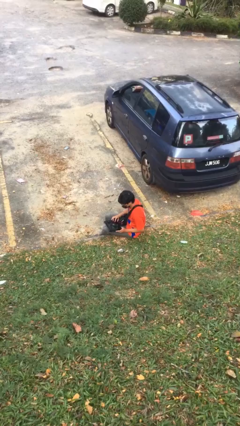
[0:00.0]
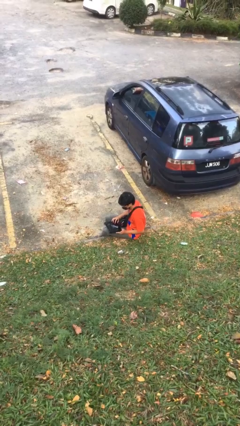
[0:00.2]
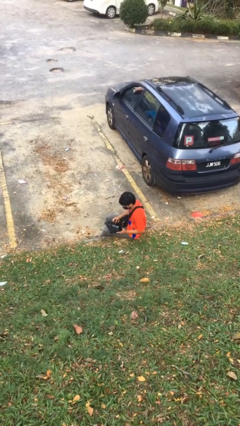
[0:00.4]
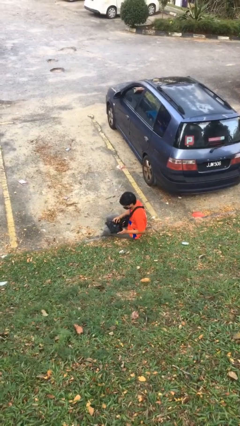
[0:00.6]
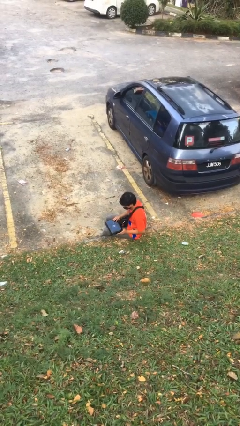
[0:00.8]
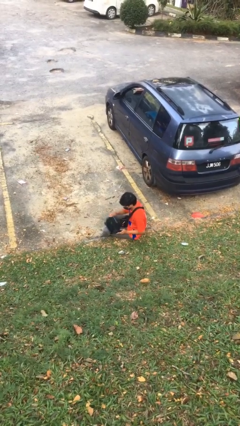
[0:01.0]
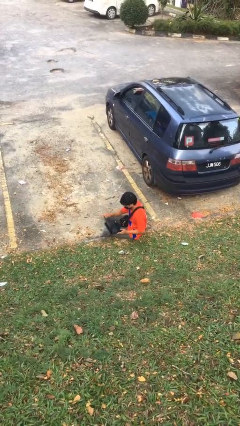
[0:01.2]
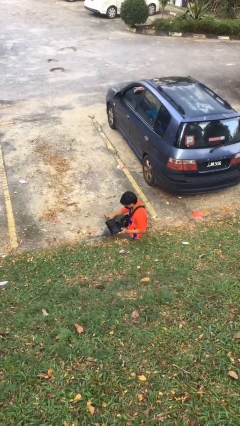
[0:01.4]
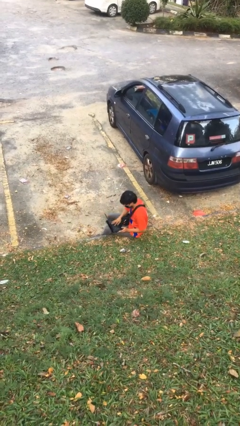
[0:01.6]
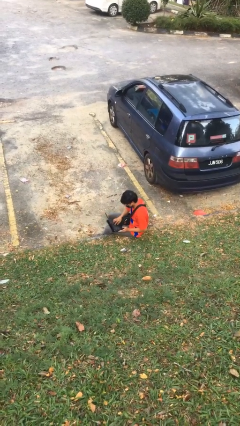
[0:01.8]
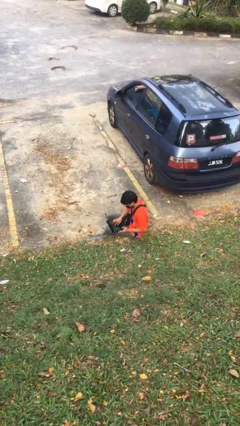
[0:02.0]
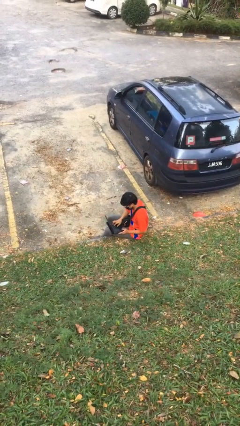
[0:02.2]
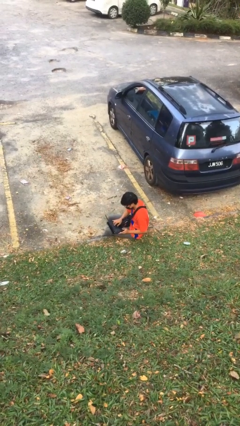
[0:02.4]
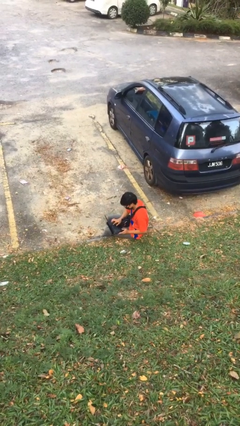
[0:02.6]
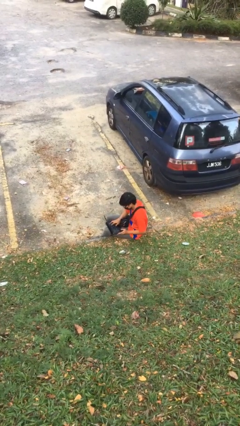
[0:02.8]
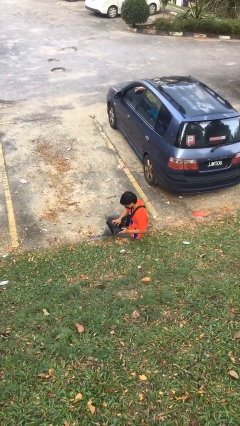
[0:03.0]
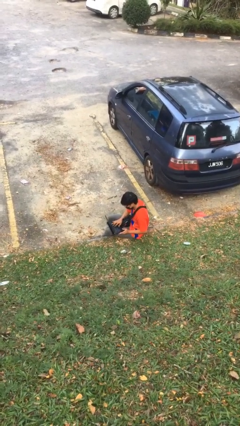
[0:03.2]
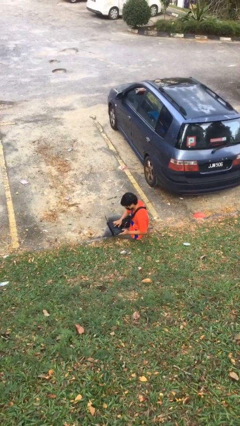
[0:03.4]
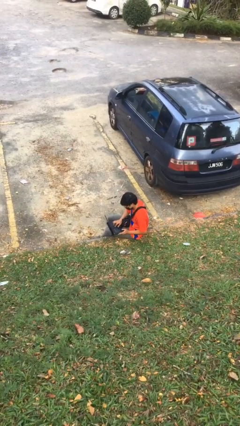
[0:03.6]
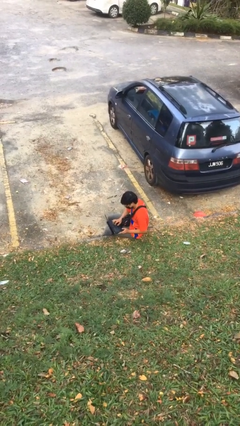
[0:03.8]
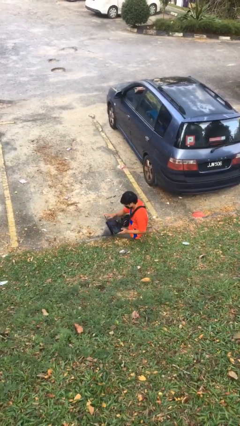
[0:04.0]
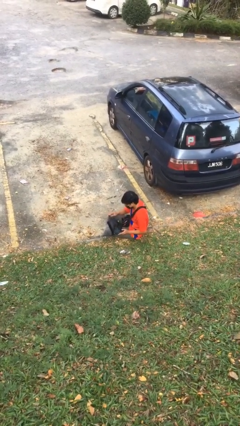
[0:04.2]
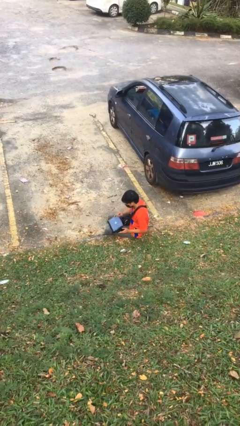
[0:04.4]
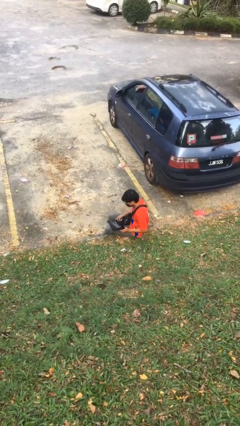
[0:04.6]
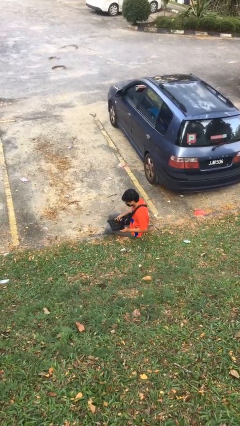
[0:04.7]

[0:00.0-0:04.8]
person interacts with laptop

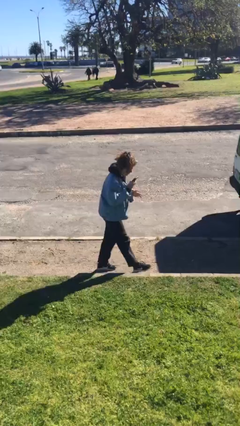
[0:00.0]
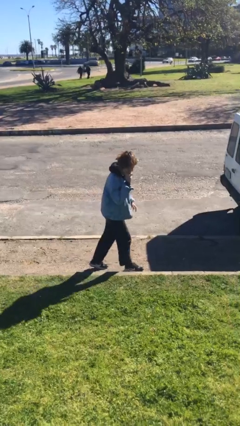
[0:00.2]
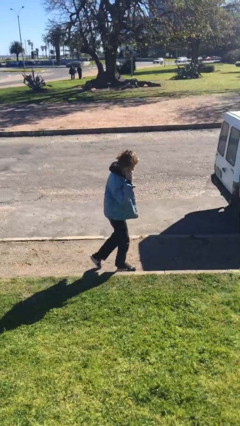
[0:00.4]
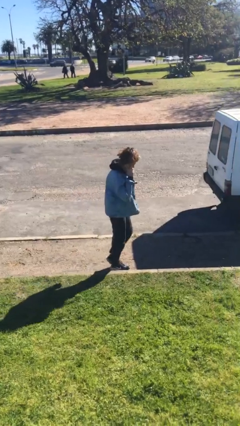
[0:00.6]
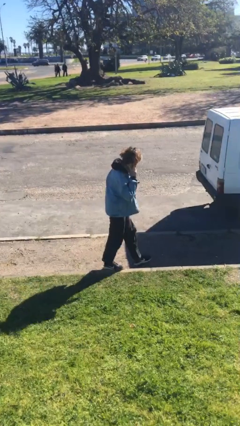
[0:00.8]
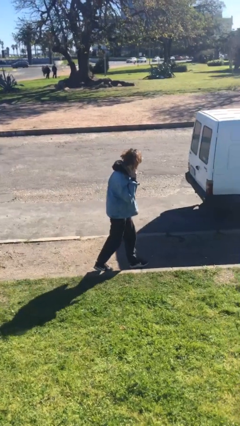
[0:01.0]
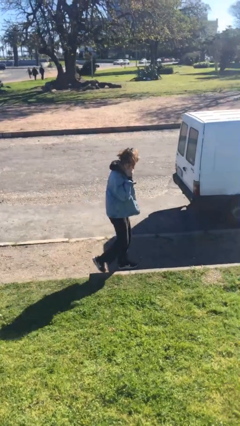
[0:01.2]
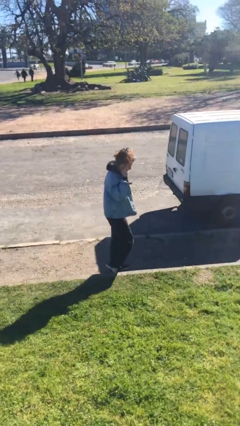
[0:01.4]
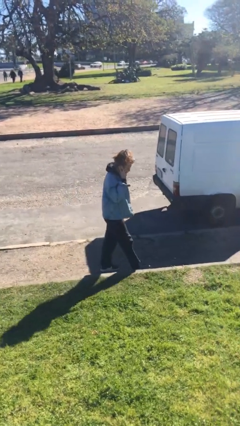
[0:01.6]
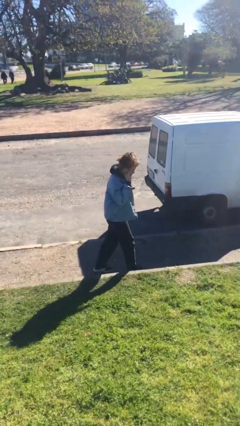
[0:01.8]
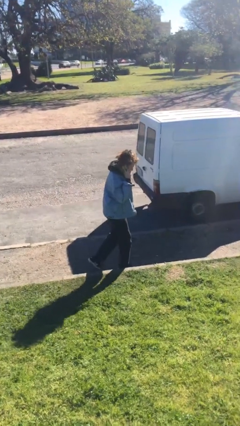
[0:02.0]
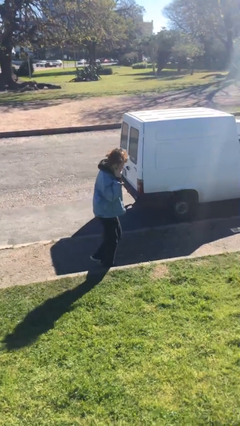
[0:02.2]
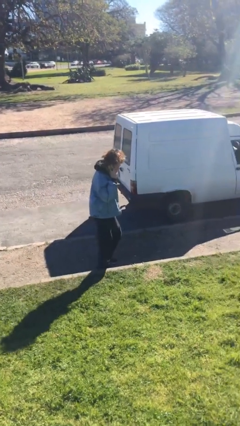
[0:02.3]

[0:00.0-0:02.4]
person talks on phone

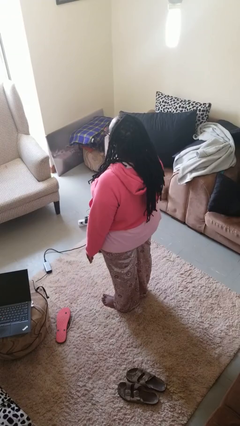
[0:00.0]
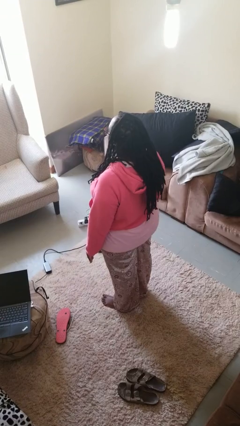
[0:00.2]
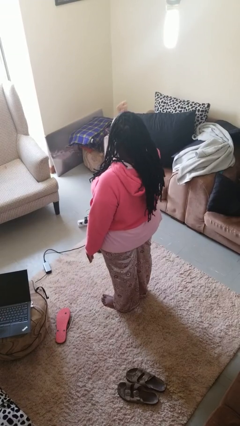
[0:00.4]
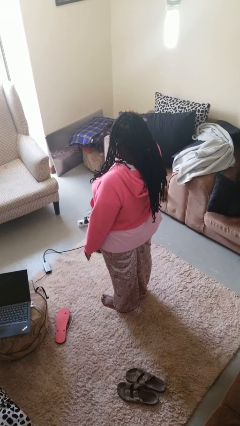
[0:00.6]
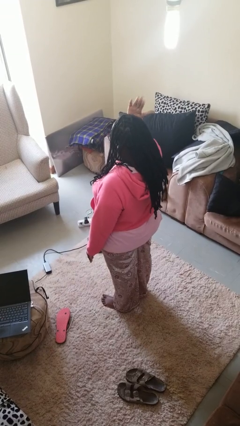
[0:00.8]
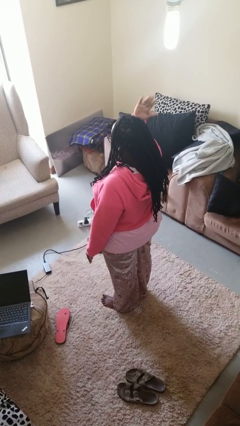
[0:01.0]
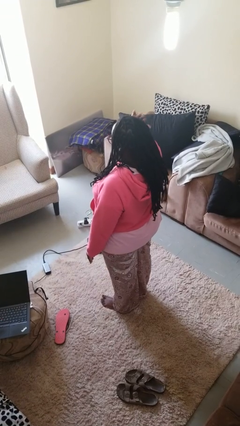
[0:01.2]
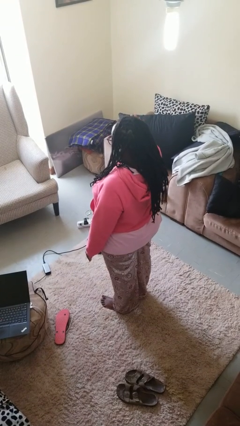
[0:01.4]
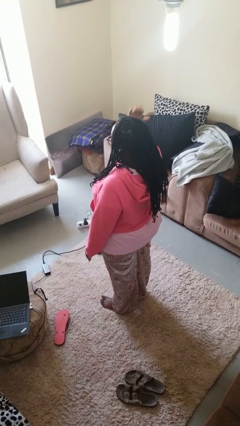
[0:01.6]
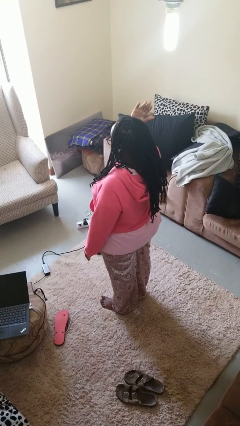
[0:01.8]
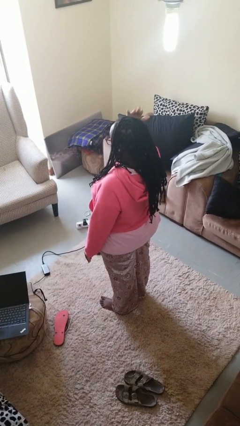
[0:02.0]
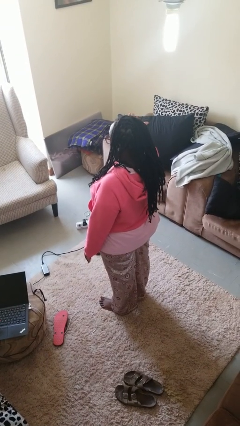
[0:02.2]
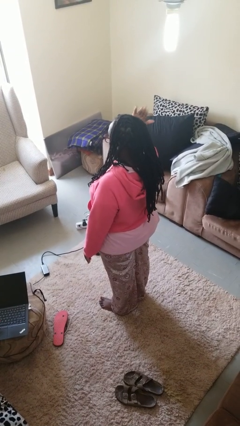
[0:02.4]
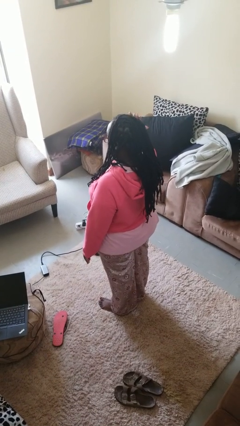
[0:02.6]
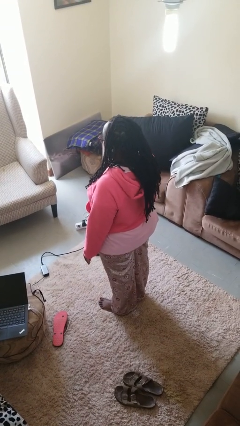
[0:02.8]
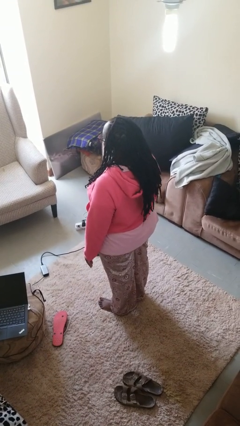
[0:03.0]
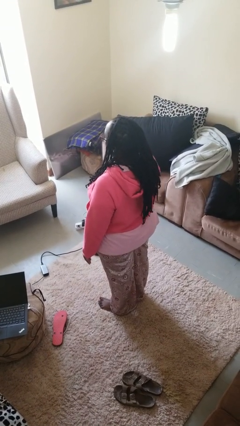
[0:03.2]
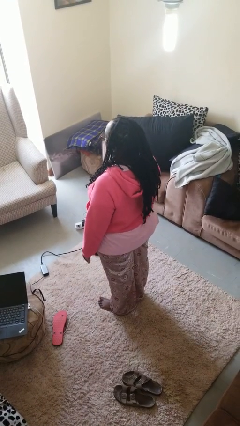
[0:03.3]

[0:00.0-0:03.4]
person pats head

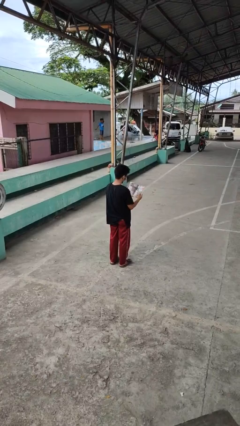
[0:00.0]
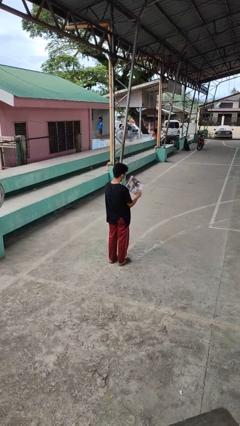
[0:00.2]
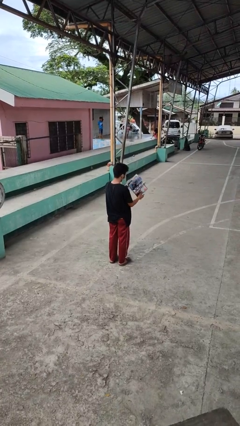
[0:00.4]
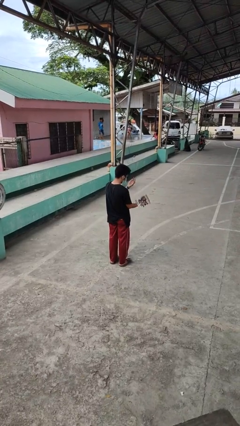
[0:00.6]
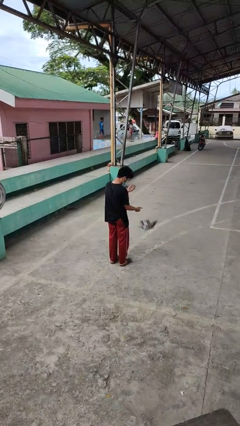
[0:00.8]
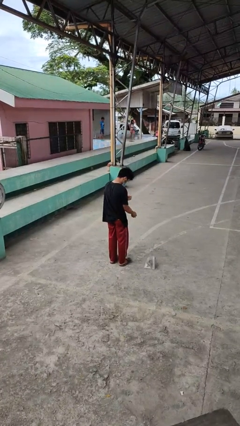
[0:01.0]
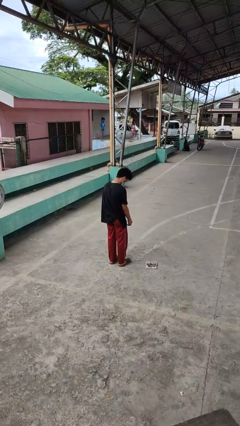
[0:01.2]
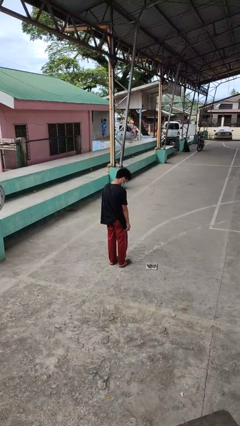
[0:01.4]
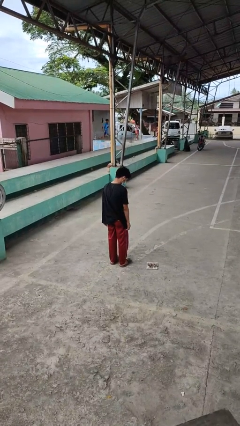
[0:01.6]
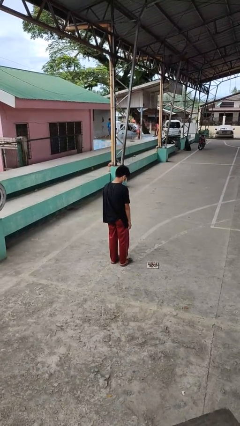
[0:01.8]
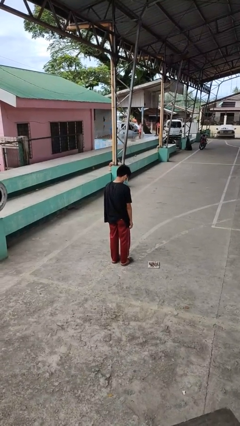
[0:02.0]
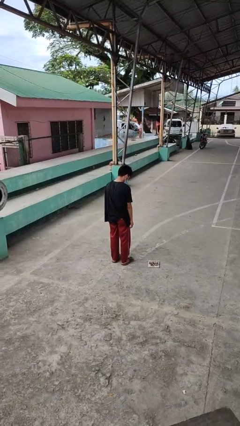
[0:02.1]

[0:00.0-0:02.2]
person drops object

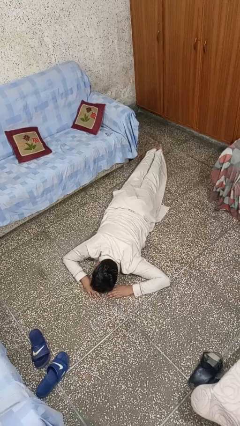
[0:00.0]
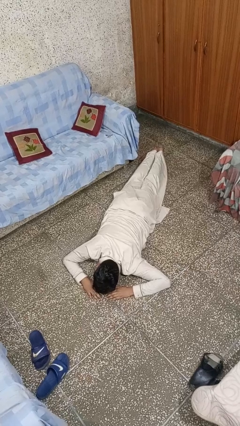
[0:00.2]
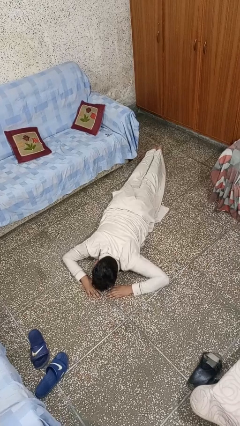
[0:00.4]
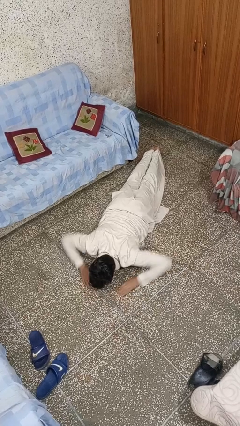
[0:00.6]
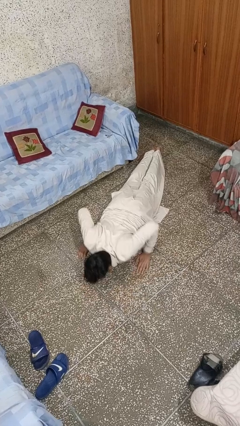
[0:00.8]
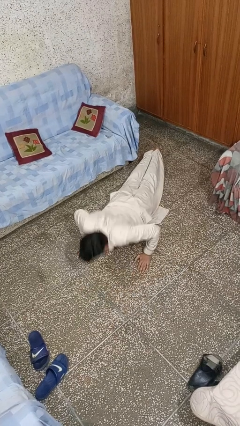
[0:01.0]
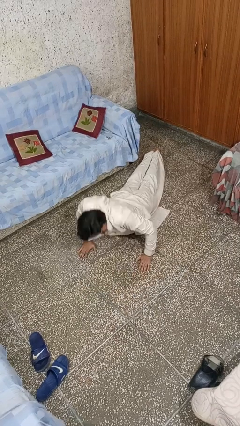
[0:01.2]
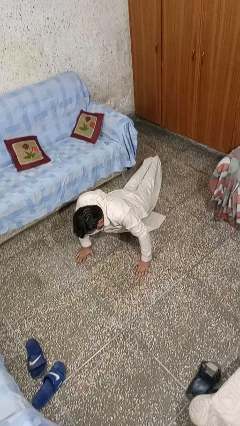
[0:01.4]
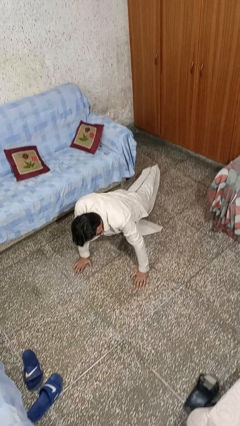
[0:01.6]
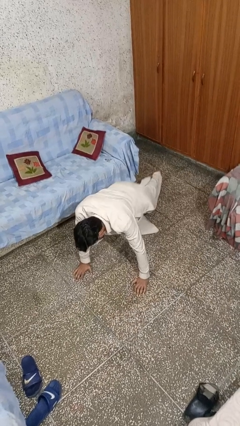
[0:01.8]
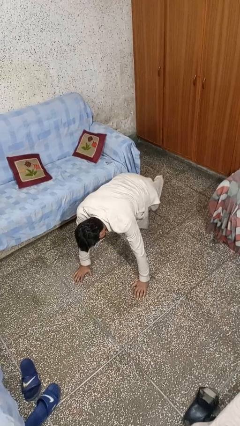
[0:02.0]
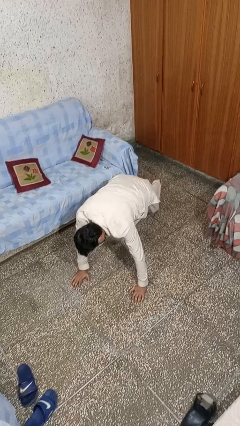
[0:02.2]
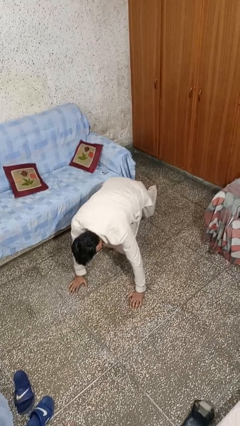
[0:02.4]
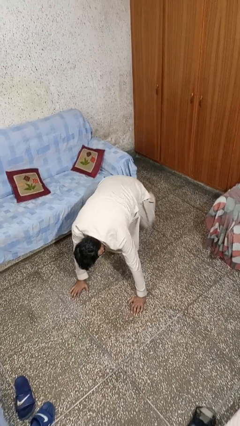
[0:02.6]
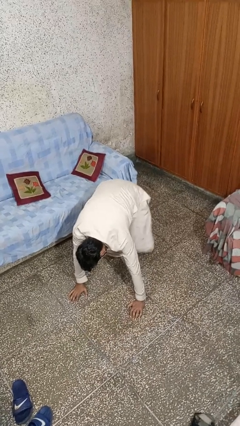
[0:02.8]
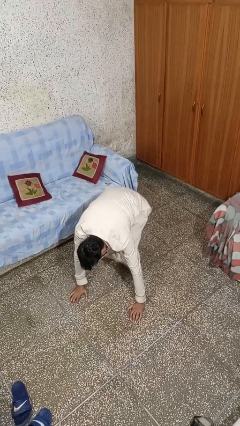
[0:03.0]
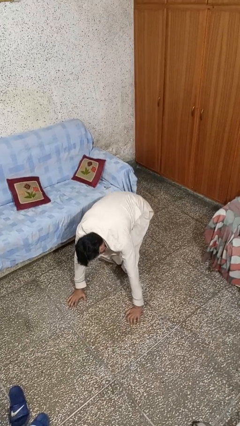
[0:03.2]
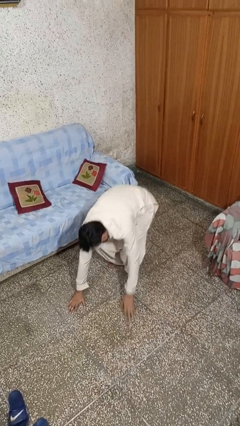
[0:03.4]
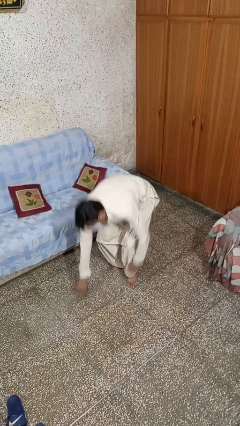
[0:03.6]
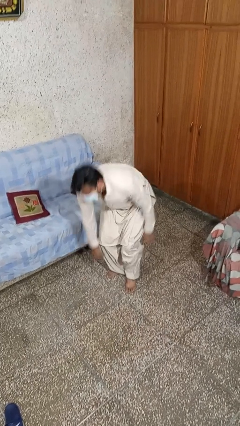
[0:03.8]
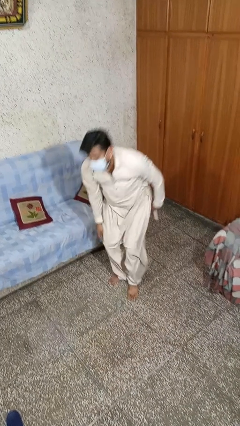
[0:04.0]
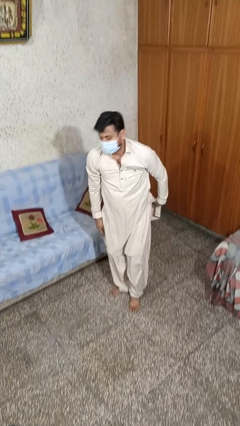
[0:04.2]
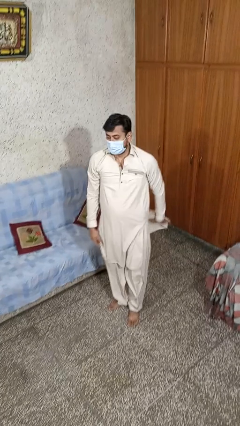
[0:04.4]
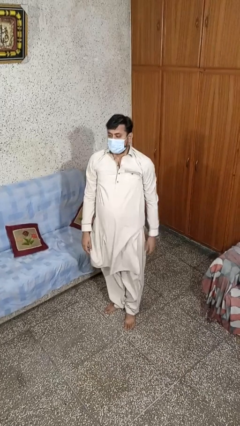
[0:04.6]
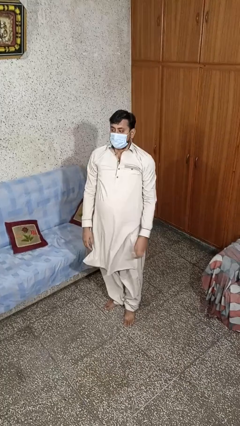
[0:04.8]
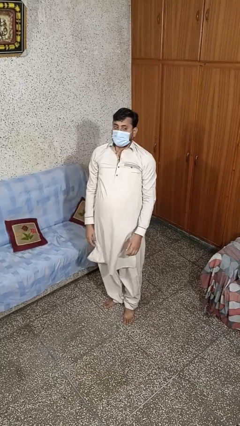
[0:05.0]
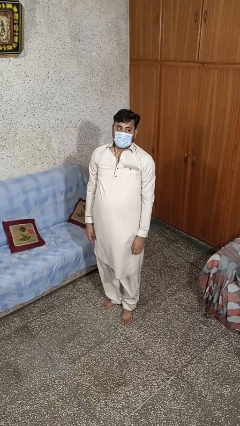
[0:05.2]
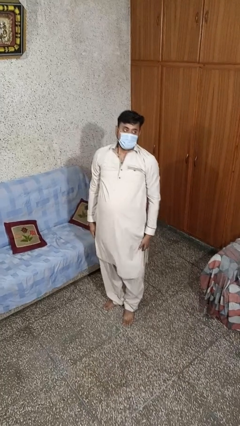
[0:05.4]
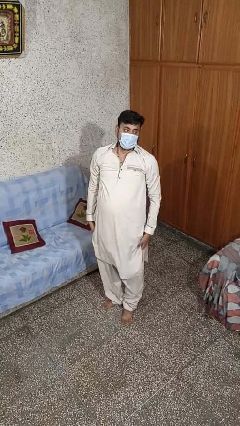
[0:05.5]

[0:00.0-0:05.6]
person stands up from floor
